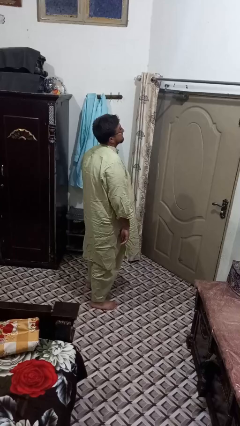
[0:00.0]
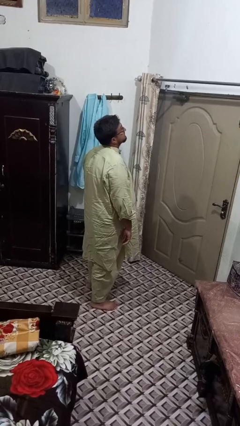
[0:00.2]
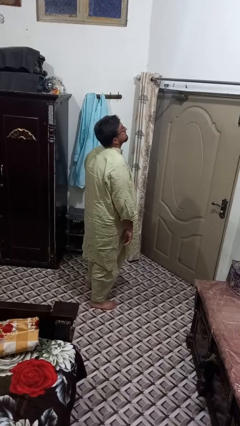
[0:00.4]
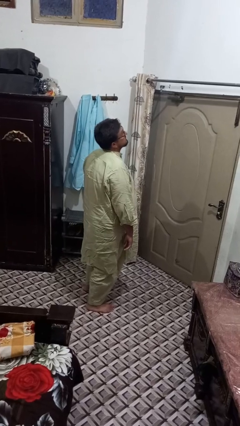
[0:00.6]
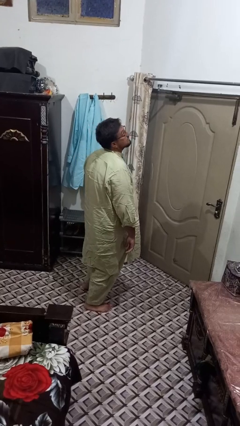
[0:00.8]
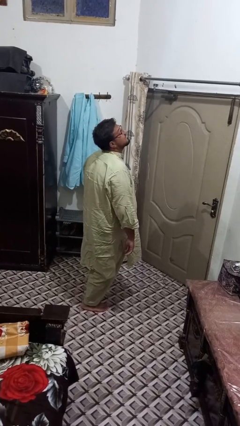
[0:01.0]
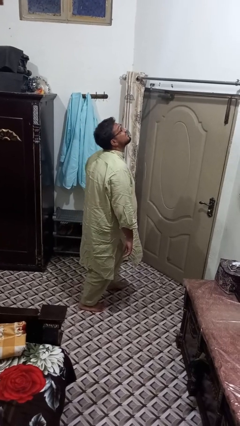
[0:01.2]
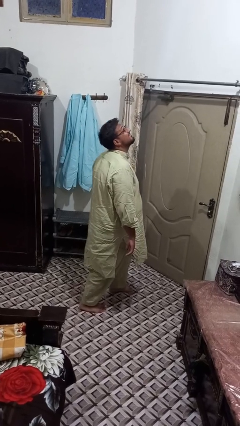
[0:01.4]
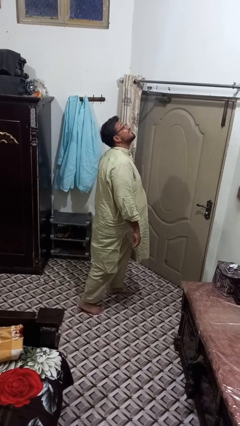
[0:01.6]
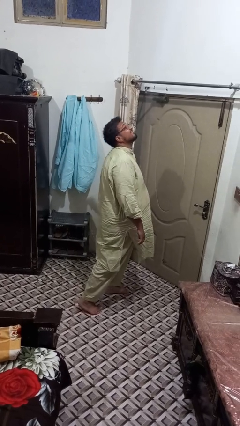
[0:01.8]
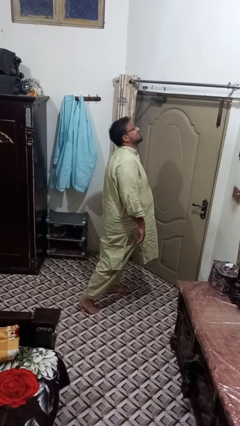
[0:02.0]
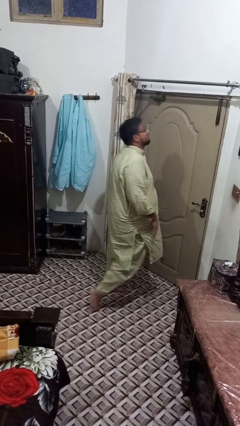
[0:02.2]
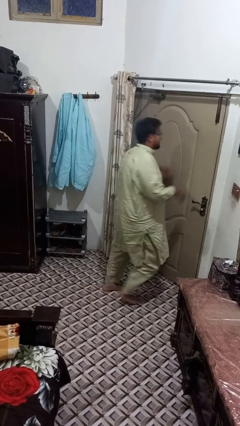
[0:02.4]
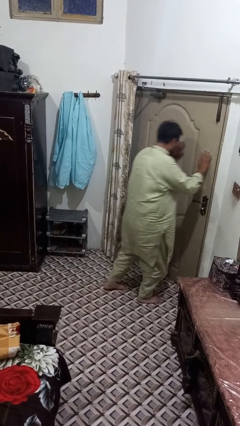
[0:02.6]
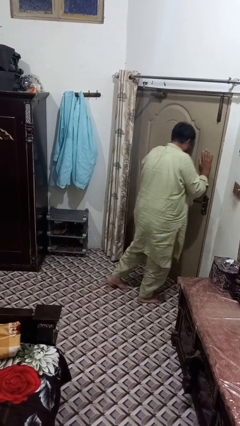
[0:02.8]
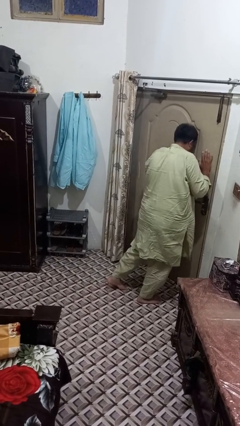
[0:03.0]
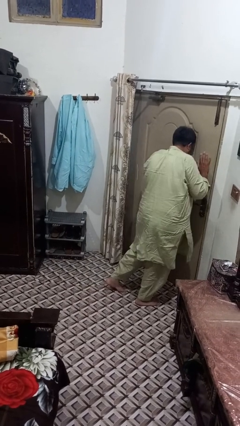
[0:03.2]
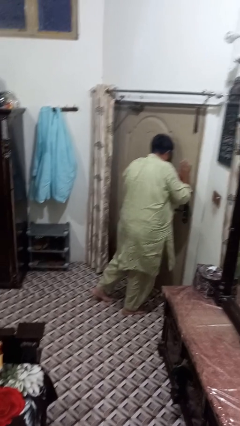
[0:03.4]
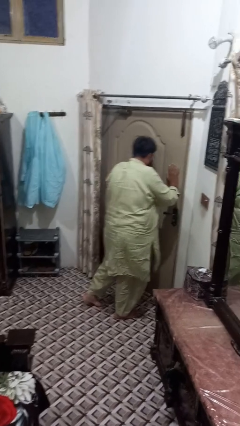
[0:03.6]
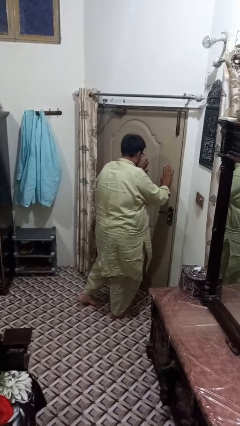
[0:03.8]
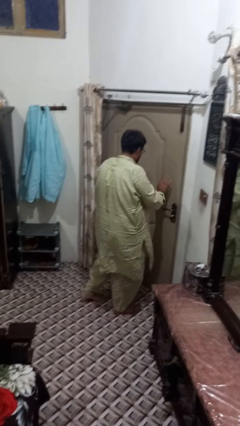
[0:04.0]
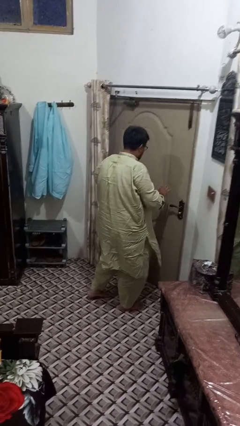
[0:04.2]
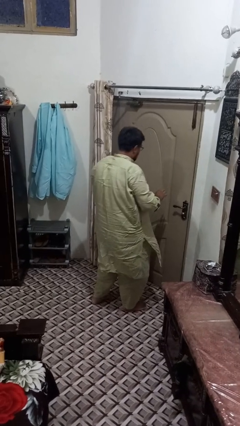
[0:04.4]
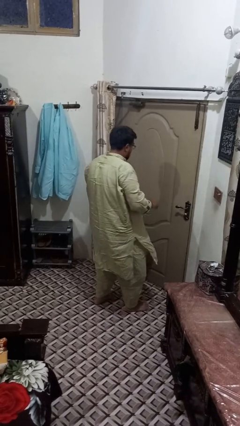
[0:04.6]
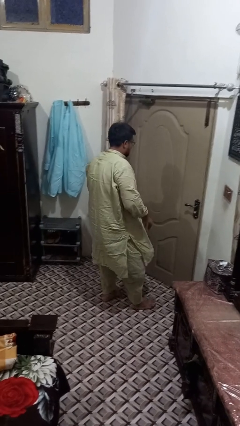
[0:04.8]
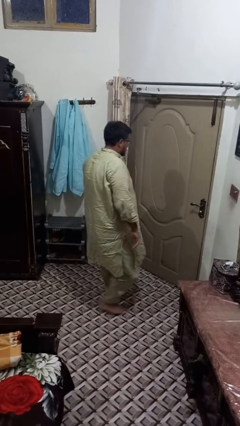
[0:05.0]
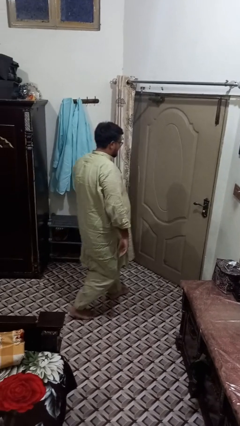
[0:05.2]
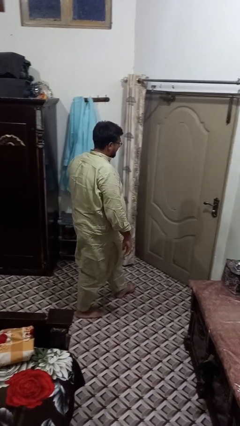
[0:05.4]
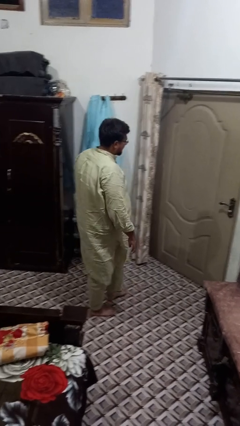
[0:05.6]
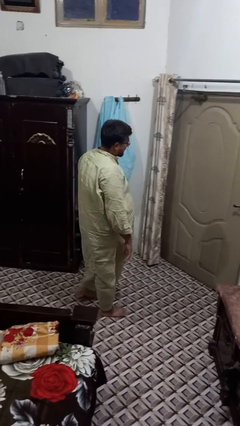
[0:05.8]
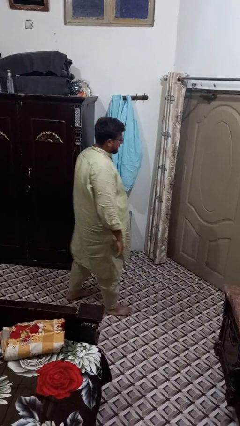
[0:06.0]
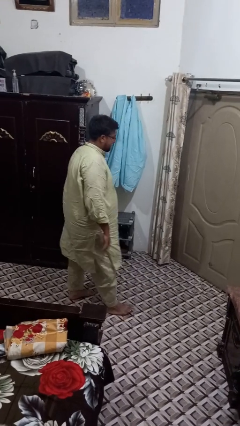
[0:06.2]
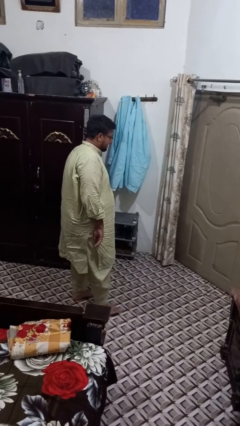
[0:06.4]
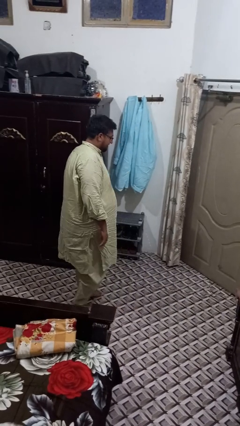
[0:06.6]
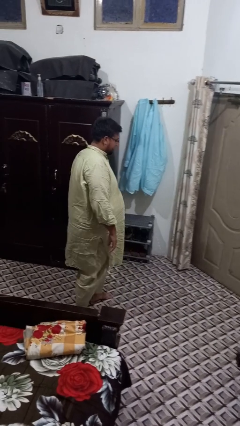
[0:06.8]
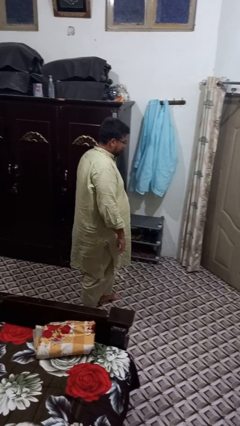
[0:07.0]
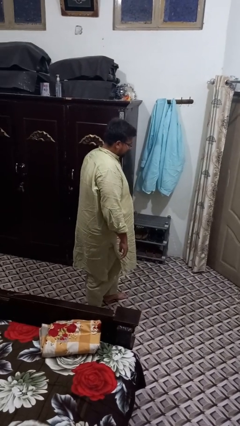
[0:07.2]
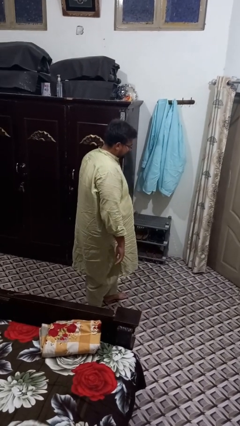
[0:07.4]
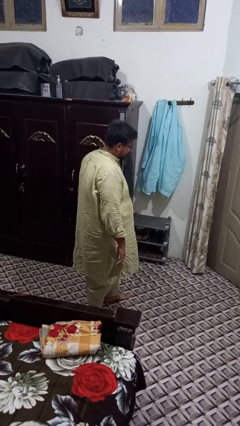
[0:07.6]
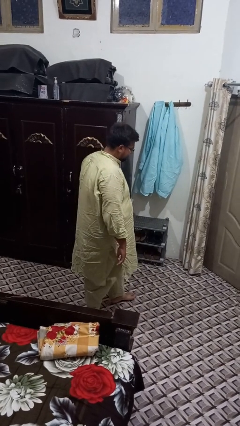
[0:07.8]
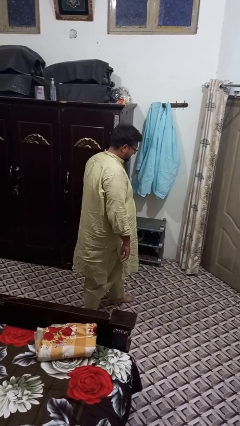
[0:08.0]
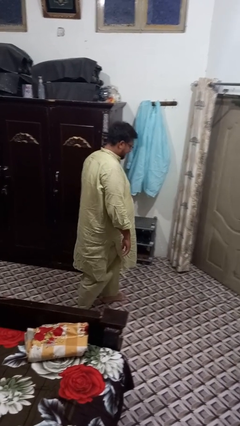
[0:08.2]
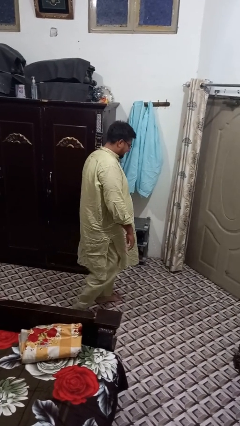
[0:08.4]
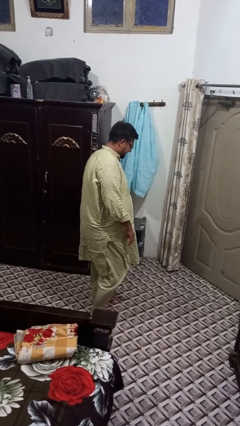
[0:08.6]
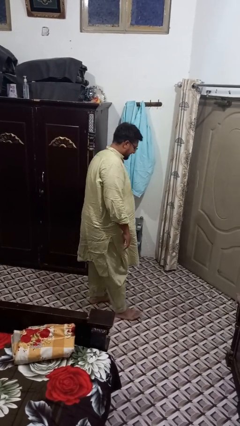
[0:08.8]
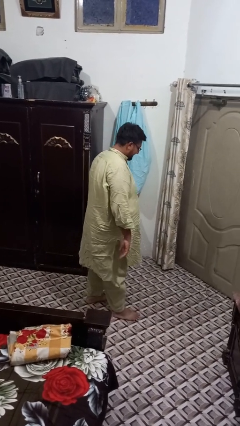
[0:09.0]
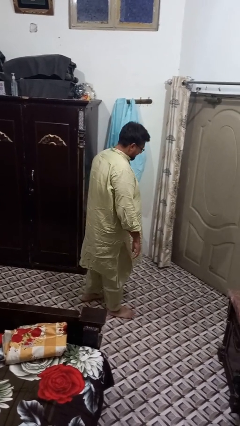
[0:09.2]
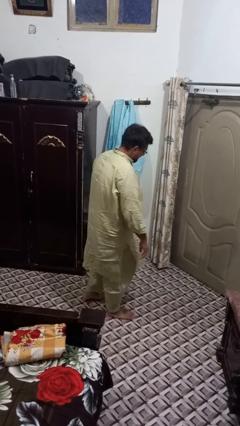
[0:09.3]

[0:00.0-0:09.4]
person bumps into wall

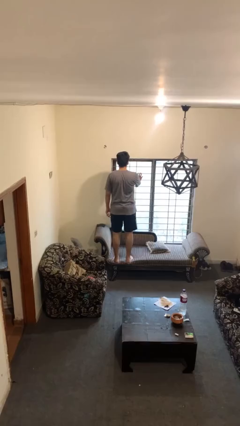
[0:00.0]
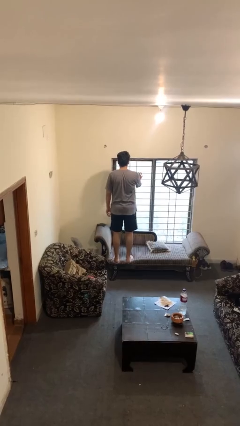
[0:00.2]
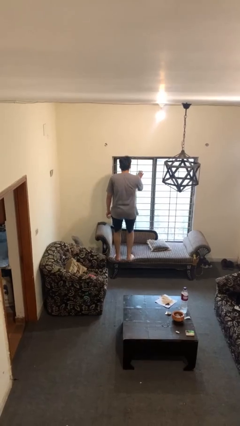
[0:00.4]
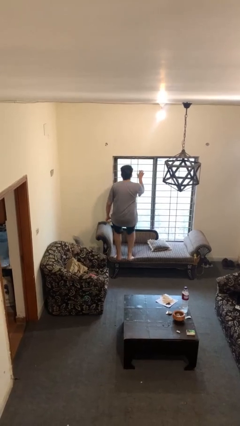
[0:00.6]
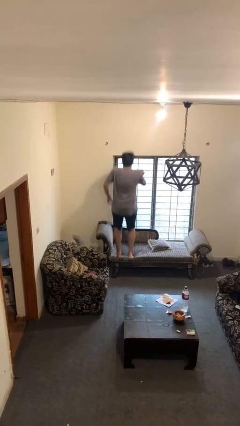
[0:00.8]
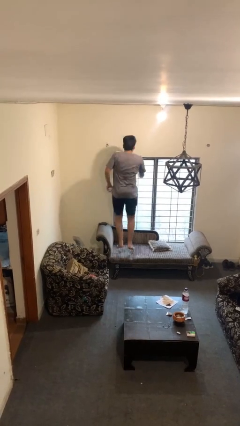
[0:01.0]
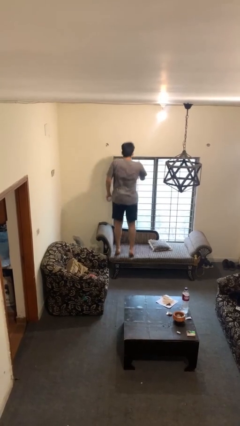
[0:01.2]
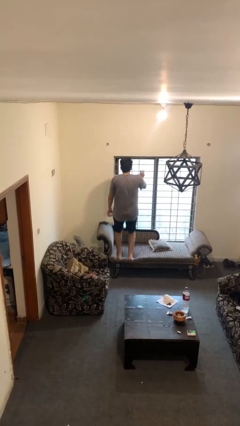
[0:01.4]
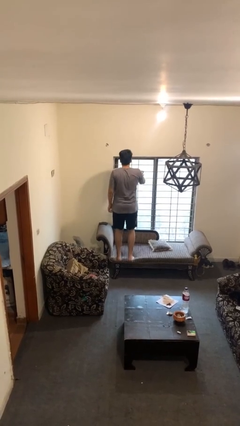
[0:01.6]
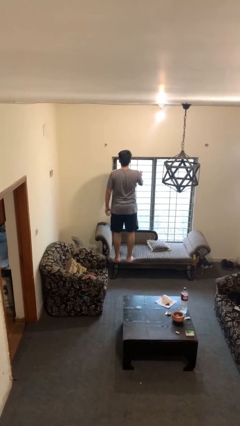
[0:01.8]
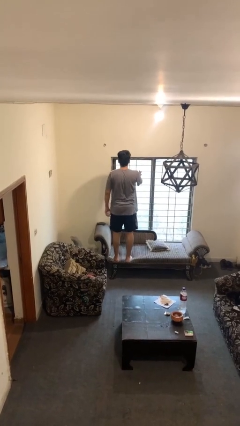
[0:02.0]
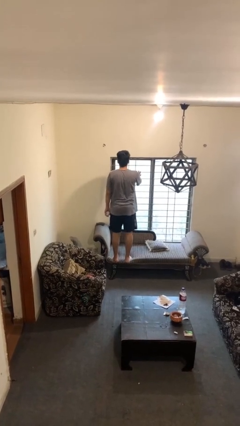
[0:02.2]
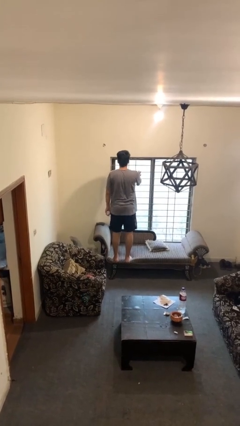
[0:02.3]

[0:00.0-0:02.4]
person jumps on couch

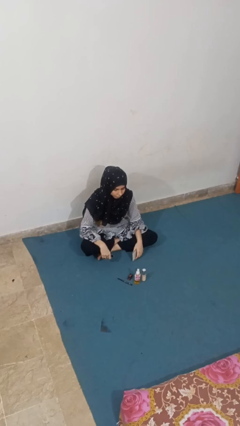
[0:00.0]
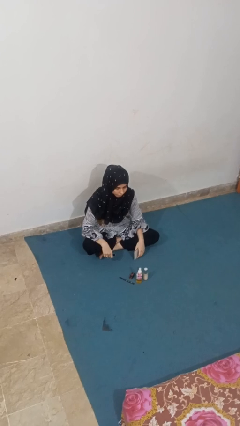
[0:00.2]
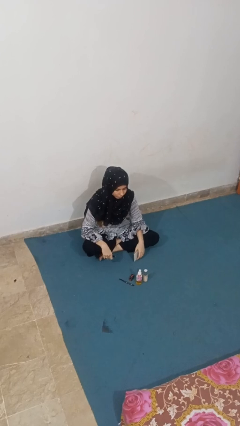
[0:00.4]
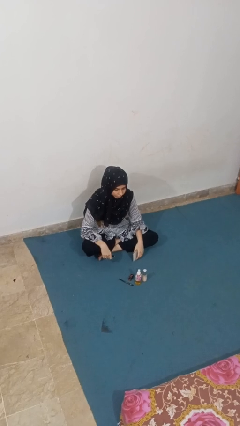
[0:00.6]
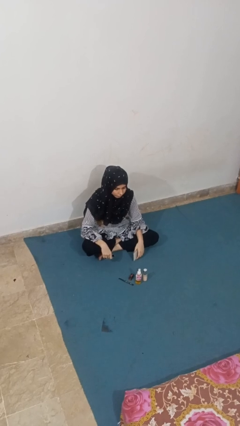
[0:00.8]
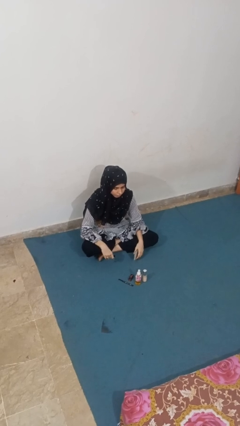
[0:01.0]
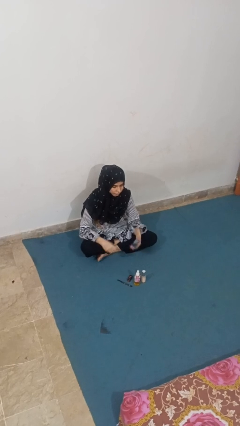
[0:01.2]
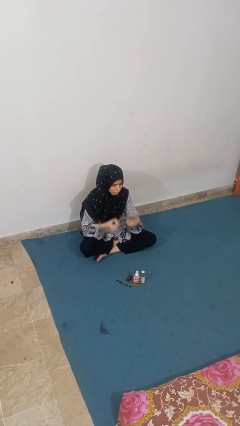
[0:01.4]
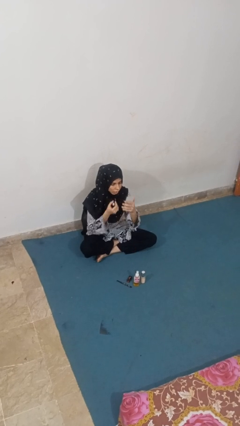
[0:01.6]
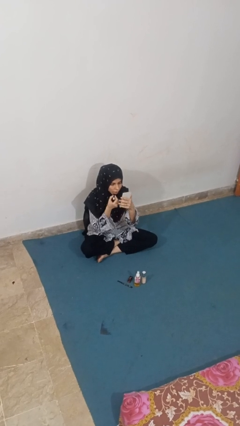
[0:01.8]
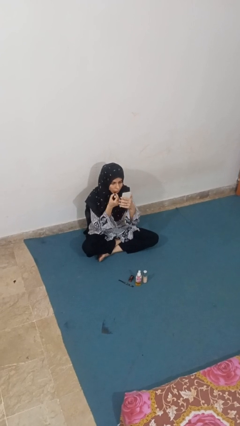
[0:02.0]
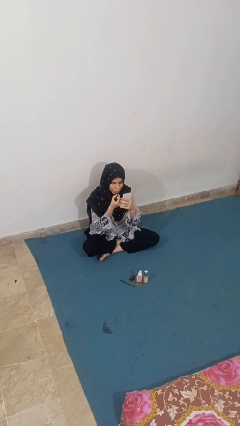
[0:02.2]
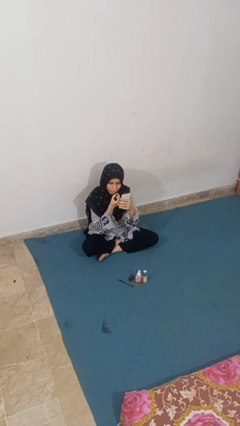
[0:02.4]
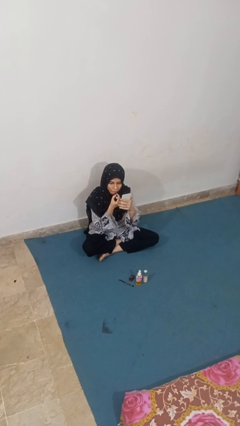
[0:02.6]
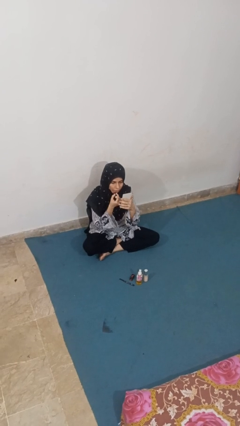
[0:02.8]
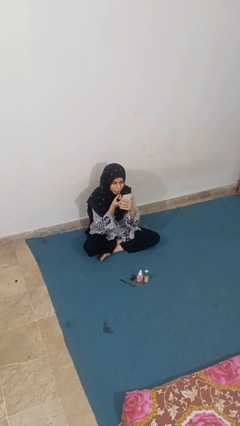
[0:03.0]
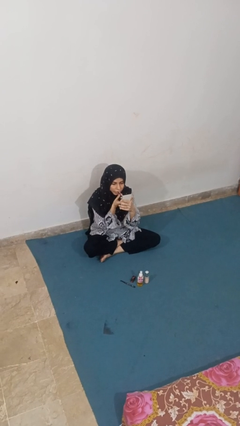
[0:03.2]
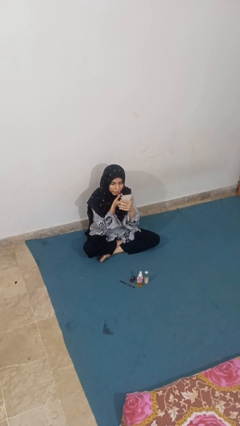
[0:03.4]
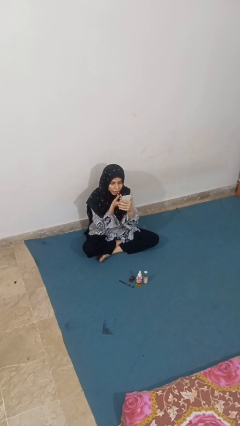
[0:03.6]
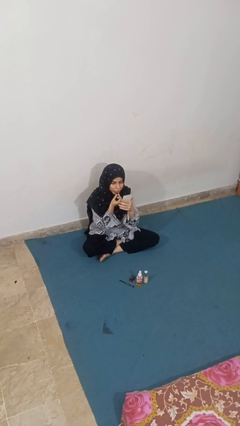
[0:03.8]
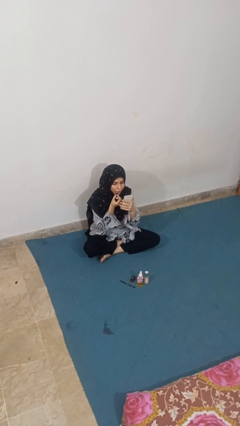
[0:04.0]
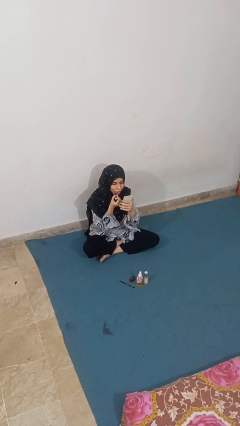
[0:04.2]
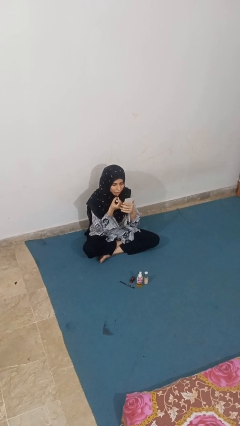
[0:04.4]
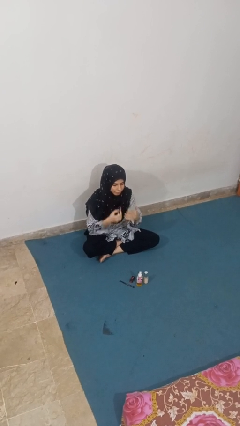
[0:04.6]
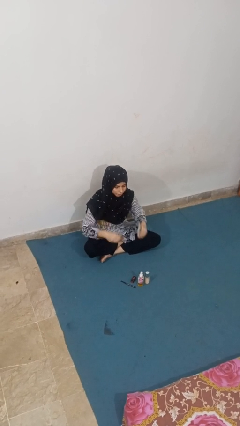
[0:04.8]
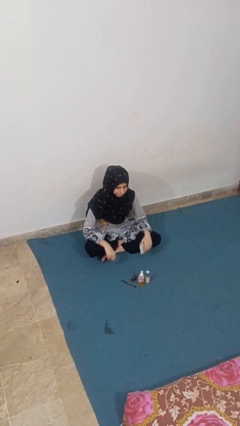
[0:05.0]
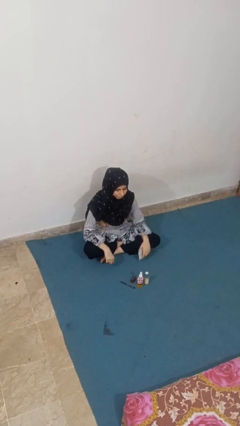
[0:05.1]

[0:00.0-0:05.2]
person applies lip makeup

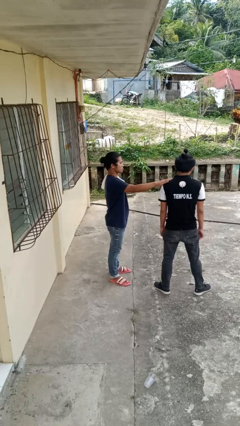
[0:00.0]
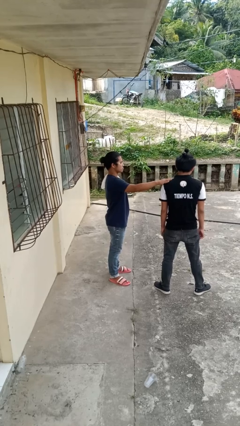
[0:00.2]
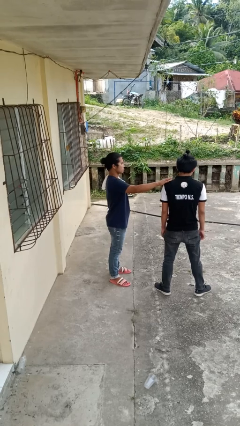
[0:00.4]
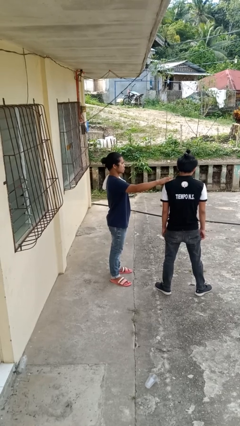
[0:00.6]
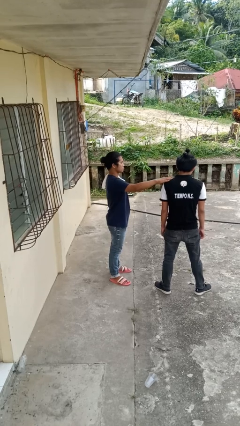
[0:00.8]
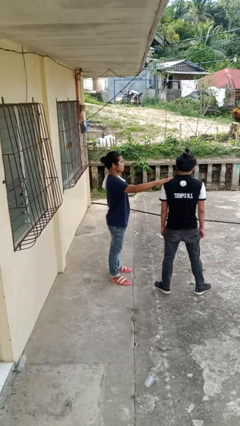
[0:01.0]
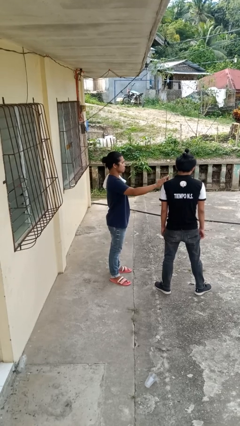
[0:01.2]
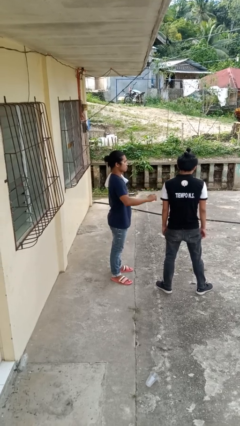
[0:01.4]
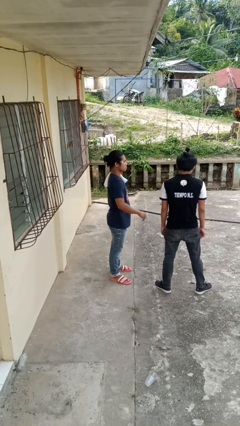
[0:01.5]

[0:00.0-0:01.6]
person pounds shoulders of person
